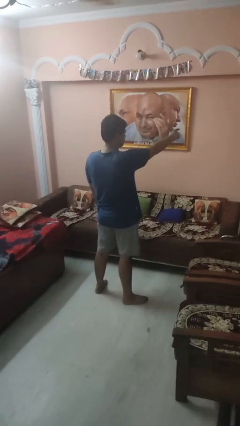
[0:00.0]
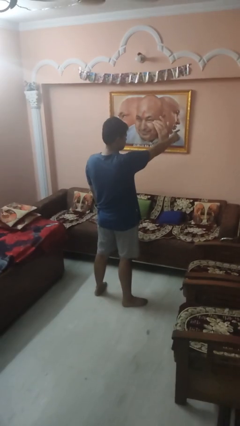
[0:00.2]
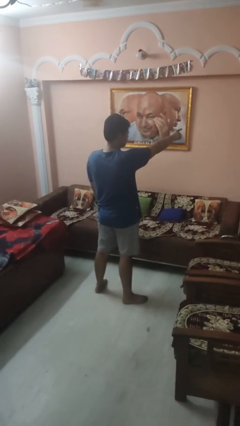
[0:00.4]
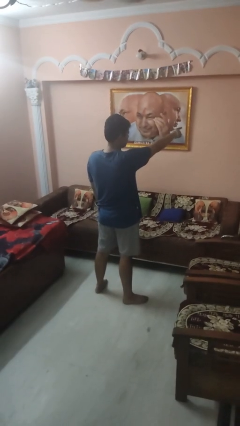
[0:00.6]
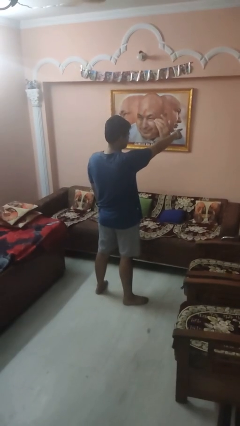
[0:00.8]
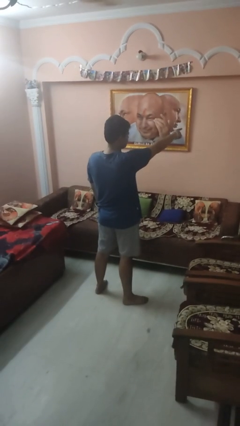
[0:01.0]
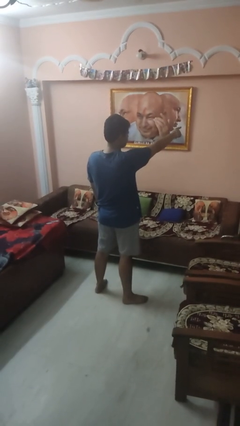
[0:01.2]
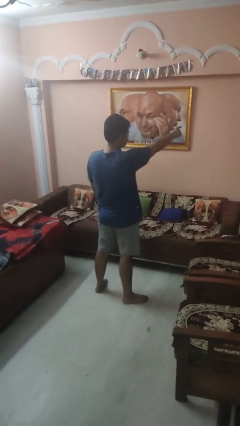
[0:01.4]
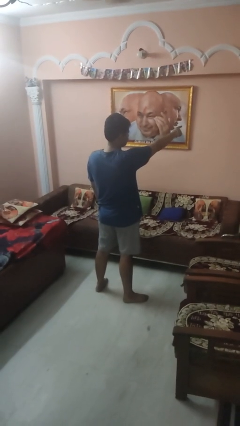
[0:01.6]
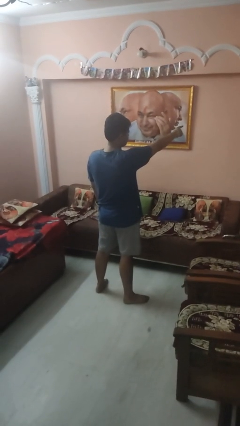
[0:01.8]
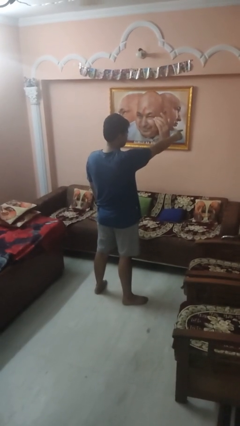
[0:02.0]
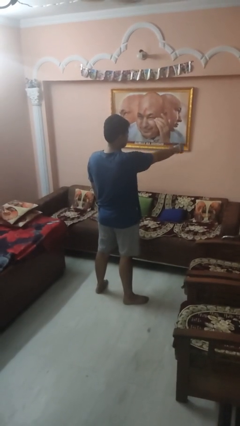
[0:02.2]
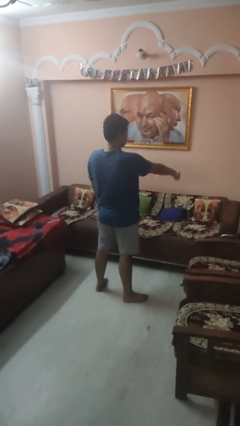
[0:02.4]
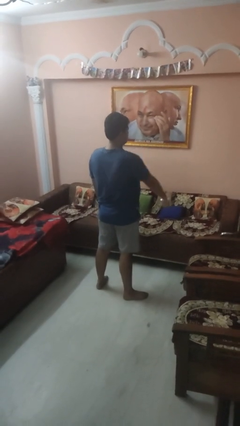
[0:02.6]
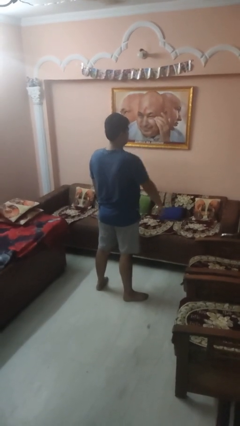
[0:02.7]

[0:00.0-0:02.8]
person points at person

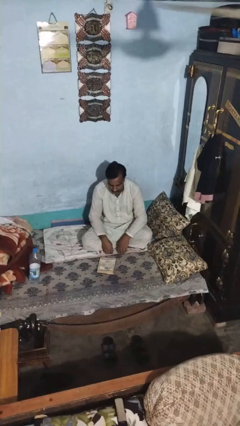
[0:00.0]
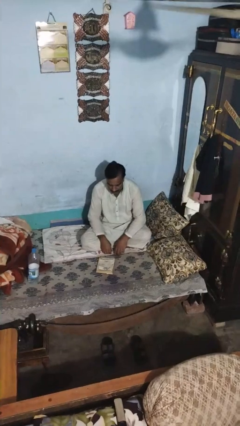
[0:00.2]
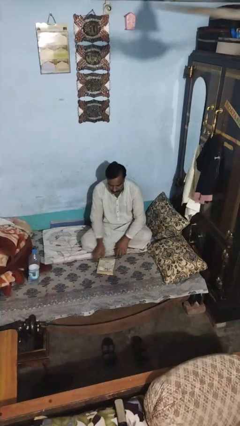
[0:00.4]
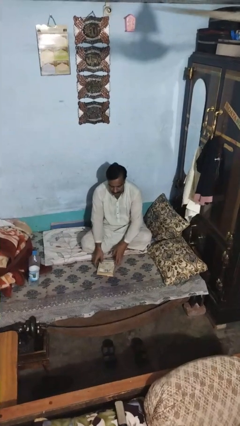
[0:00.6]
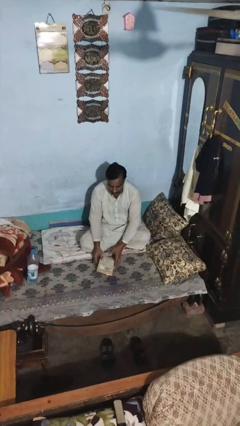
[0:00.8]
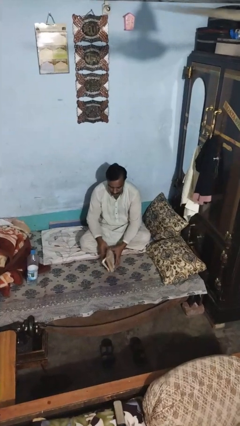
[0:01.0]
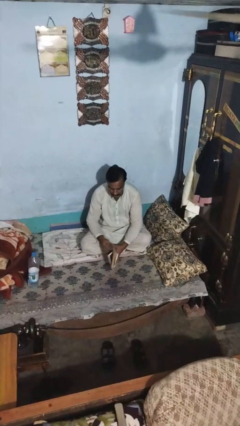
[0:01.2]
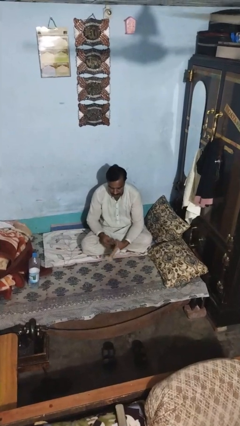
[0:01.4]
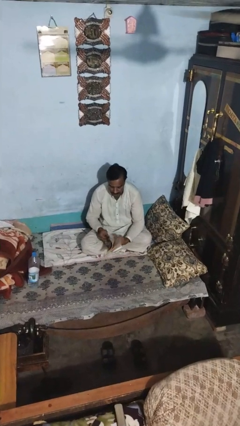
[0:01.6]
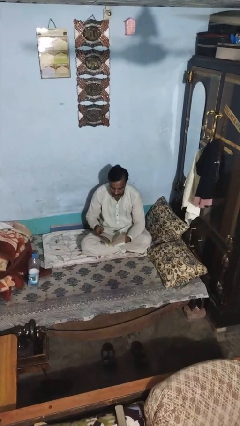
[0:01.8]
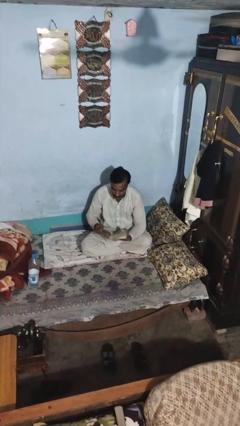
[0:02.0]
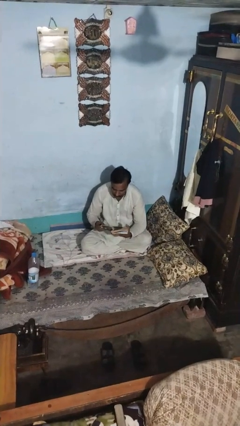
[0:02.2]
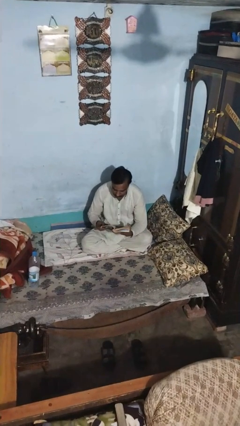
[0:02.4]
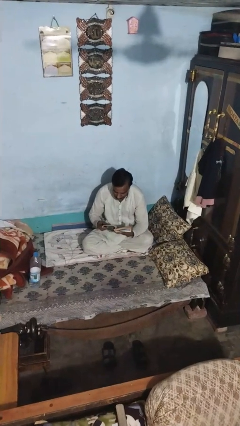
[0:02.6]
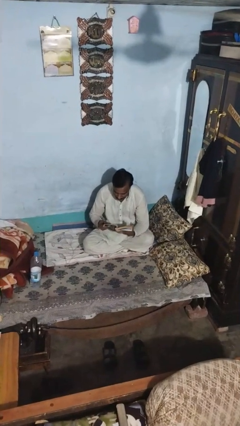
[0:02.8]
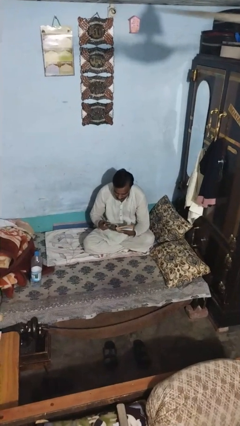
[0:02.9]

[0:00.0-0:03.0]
person reads magazine

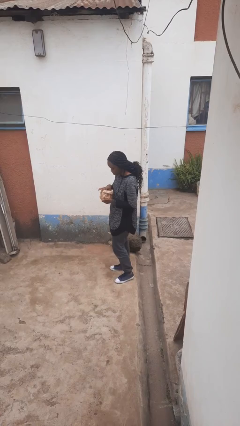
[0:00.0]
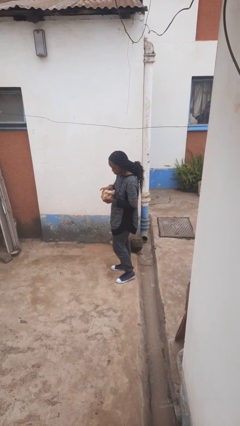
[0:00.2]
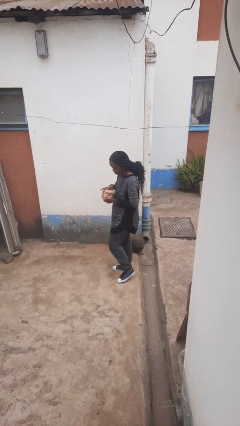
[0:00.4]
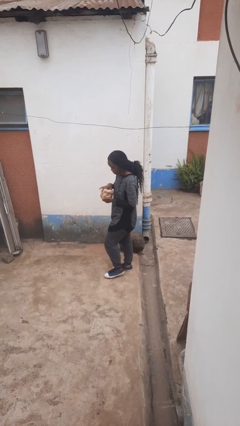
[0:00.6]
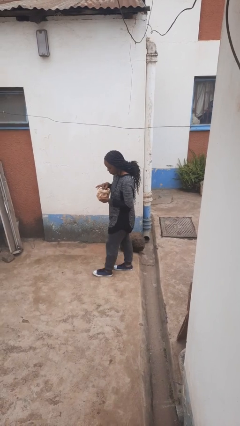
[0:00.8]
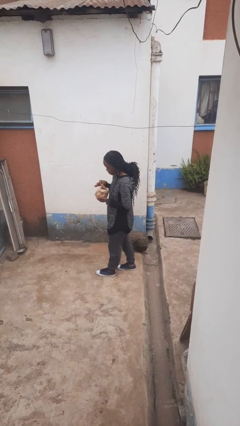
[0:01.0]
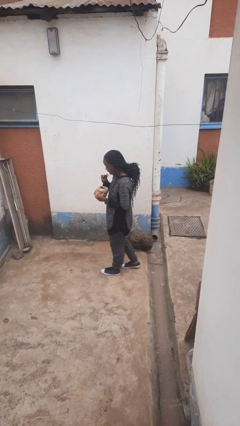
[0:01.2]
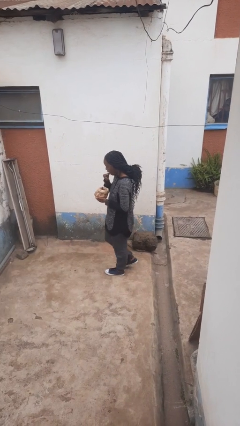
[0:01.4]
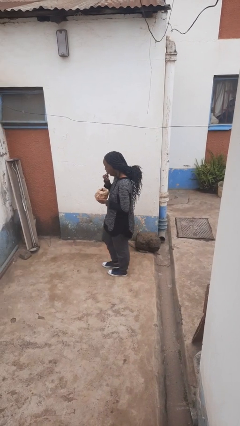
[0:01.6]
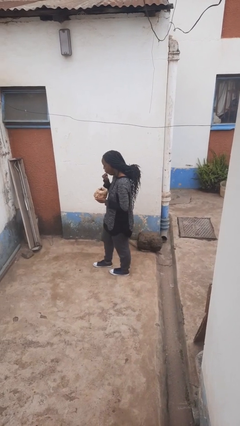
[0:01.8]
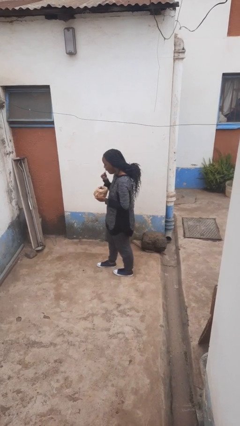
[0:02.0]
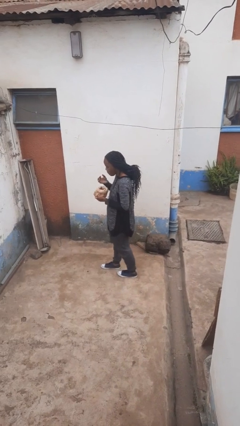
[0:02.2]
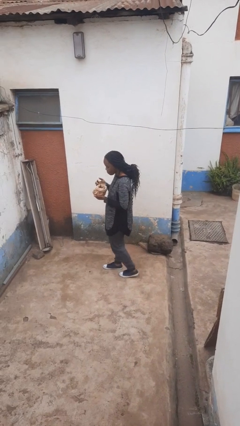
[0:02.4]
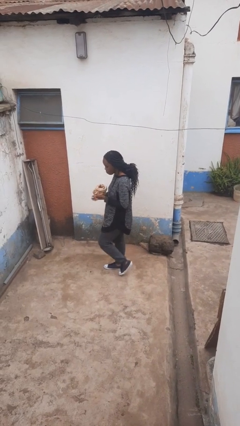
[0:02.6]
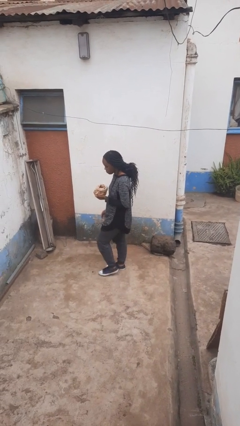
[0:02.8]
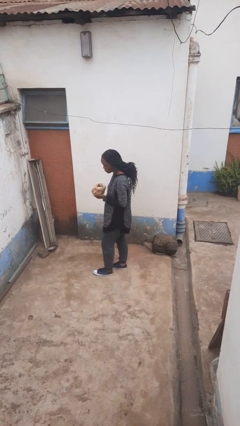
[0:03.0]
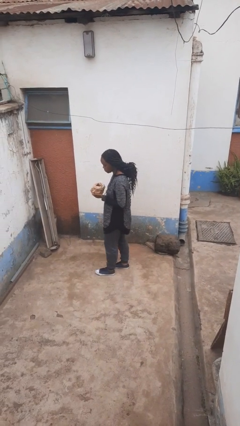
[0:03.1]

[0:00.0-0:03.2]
person eats snack from bag

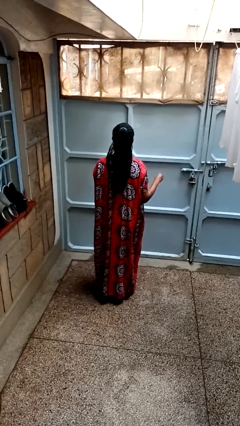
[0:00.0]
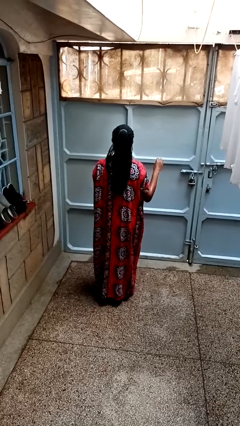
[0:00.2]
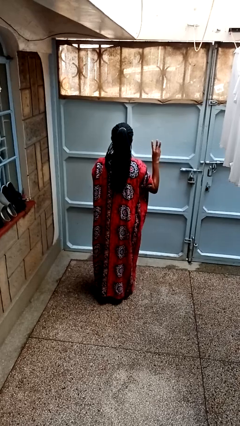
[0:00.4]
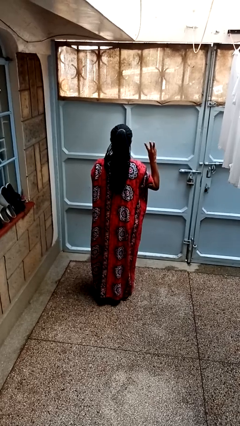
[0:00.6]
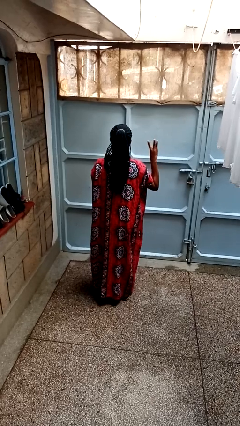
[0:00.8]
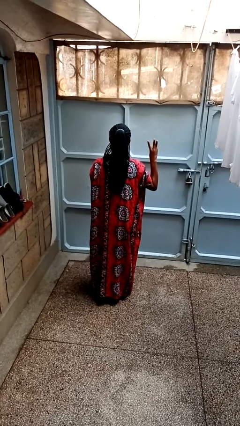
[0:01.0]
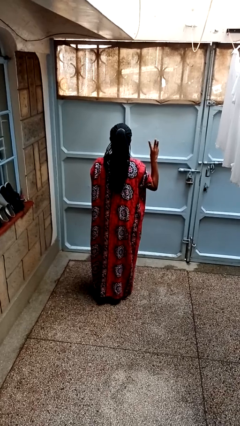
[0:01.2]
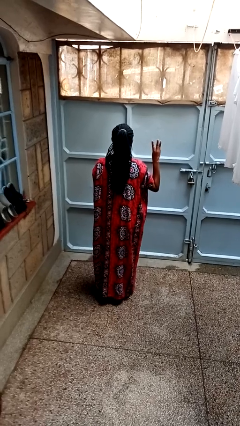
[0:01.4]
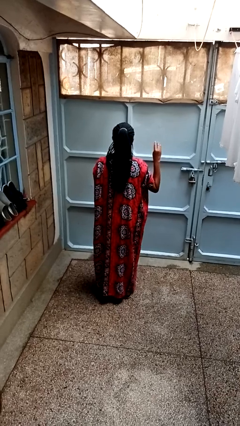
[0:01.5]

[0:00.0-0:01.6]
person gestures number three

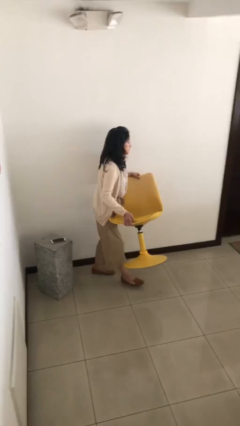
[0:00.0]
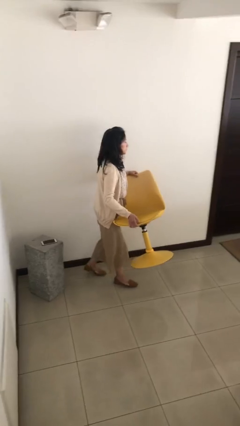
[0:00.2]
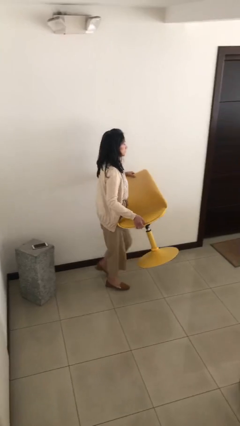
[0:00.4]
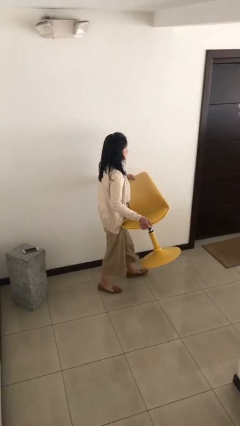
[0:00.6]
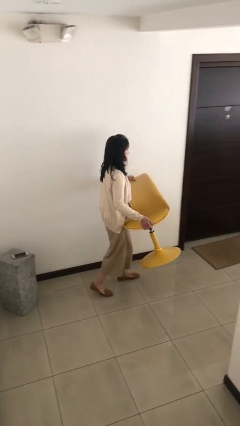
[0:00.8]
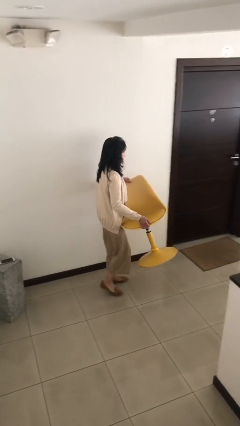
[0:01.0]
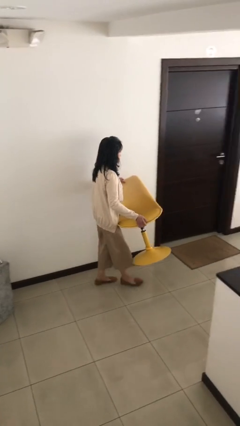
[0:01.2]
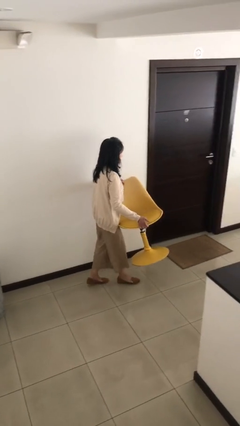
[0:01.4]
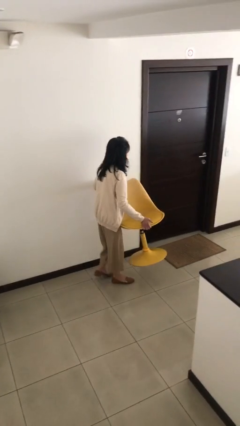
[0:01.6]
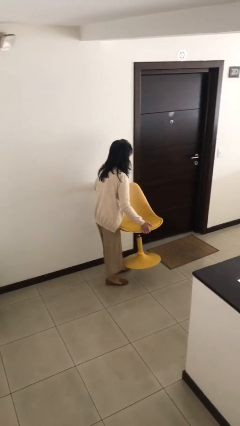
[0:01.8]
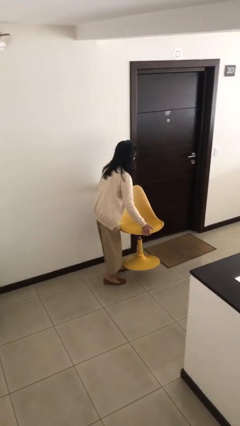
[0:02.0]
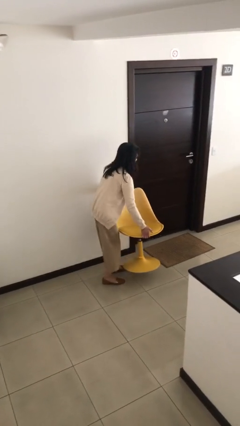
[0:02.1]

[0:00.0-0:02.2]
person carries heavy object

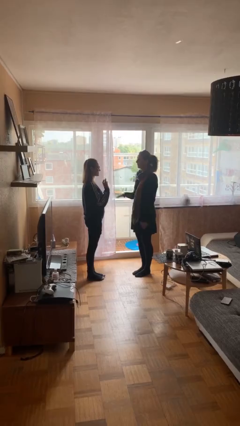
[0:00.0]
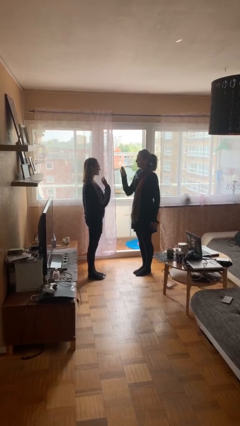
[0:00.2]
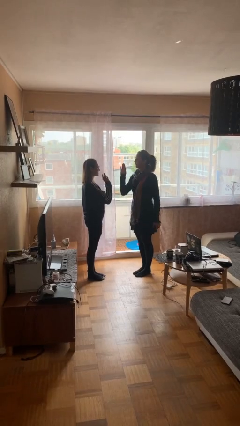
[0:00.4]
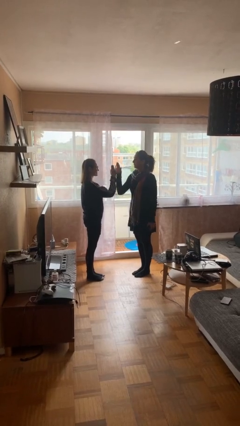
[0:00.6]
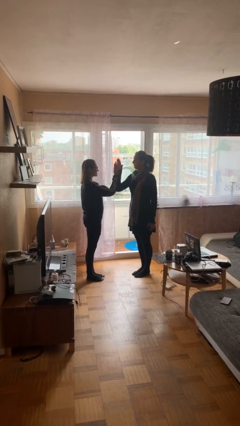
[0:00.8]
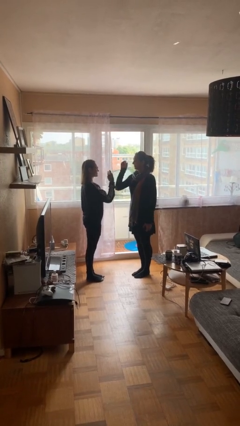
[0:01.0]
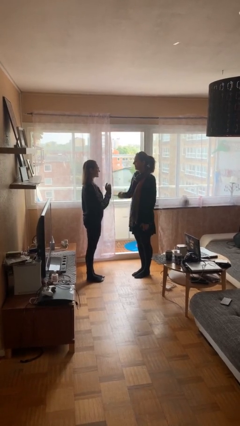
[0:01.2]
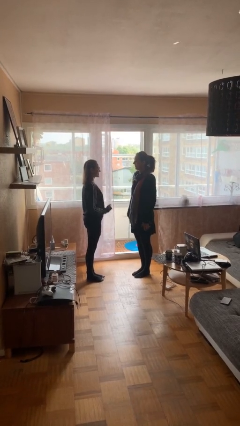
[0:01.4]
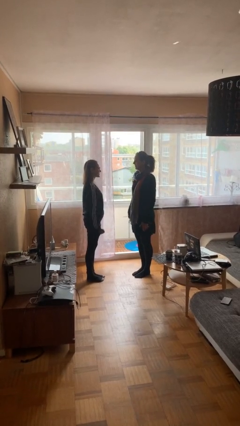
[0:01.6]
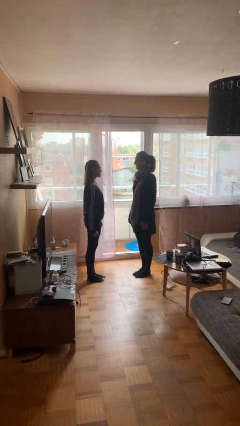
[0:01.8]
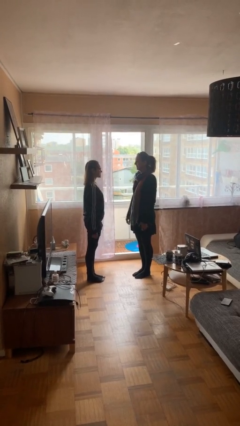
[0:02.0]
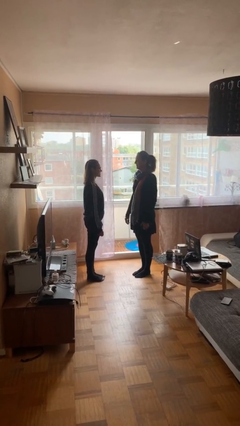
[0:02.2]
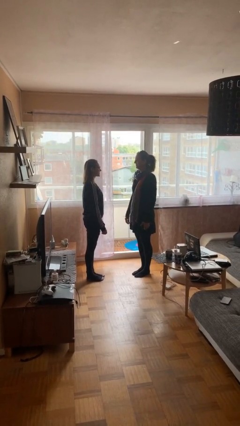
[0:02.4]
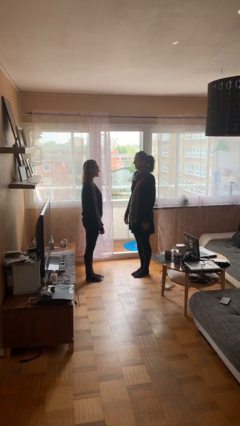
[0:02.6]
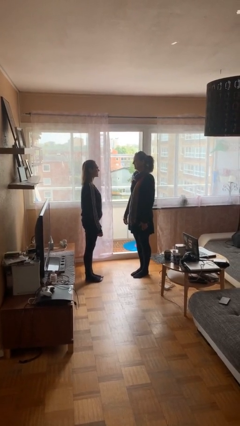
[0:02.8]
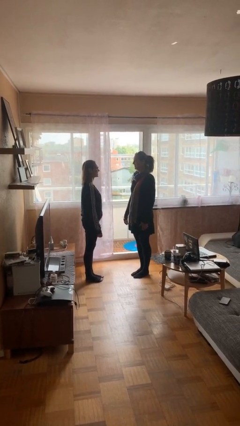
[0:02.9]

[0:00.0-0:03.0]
person highfives hand

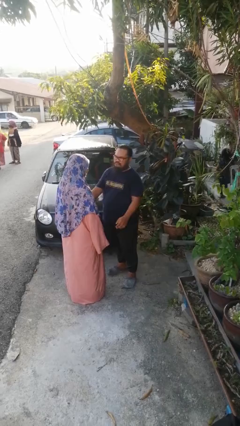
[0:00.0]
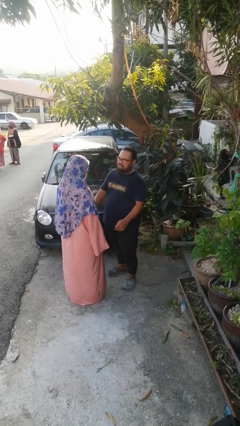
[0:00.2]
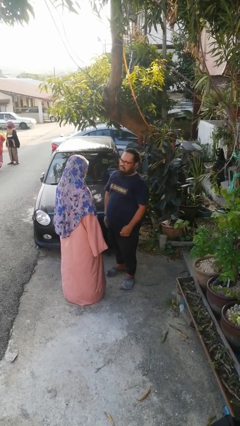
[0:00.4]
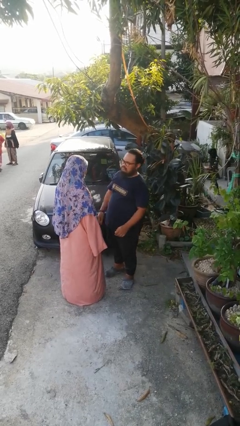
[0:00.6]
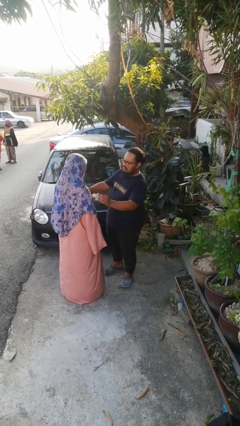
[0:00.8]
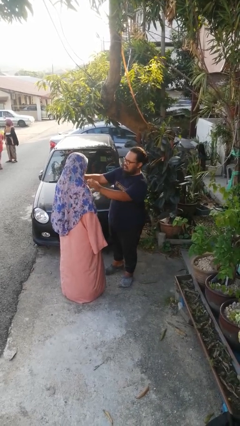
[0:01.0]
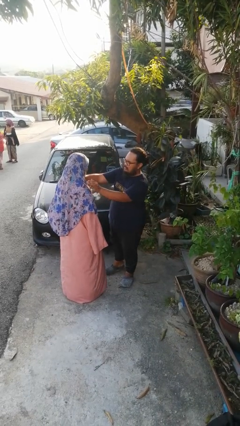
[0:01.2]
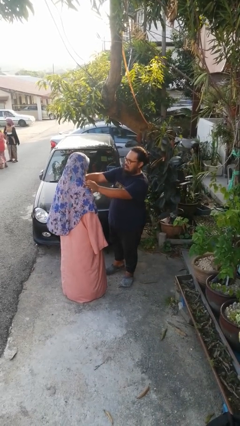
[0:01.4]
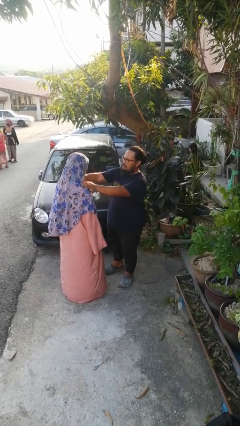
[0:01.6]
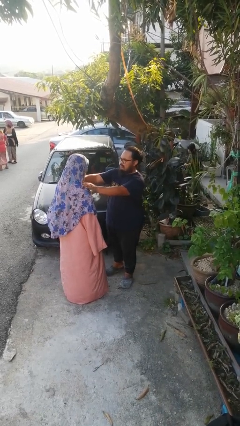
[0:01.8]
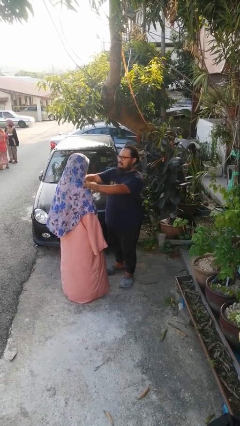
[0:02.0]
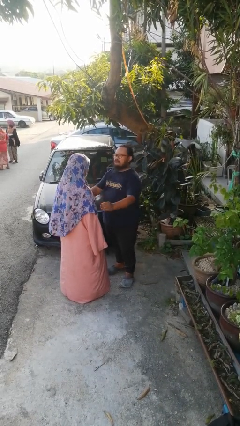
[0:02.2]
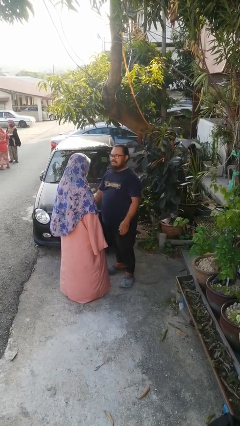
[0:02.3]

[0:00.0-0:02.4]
person pounds shoulders of person
